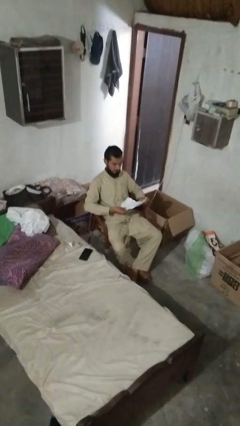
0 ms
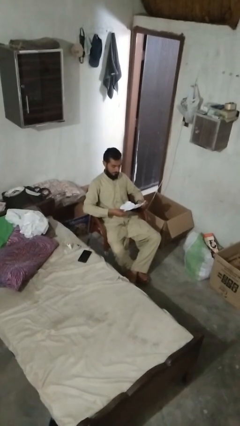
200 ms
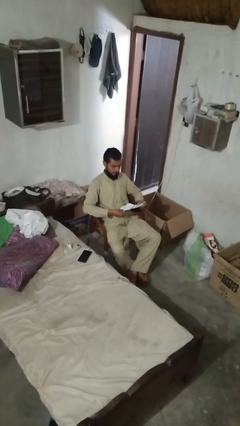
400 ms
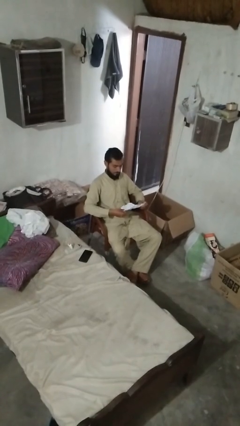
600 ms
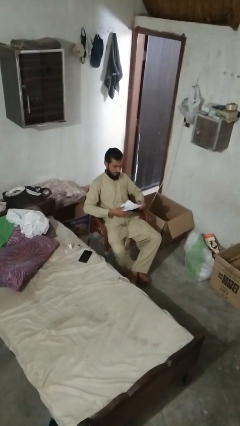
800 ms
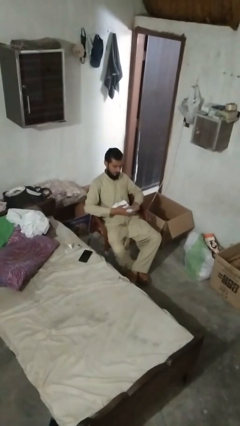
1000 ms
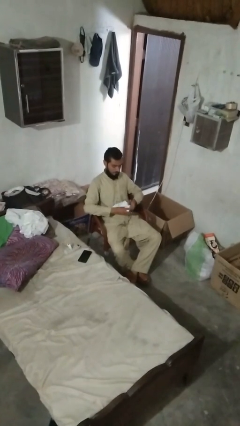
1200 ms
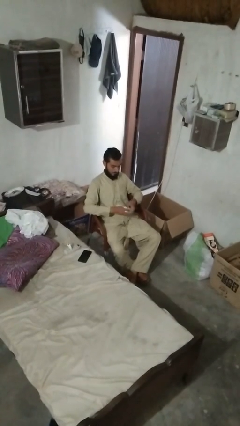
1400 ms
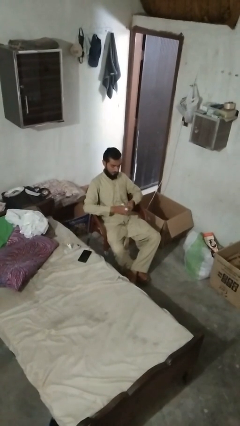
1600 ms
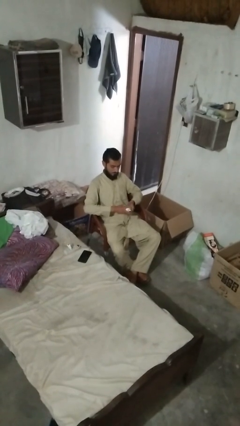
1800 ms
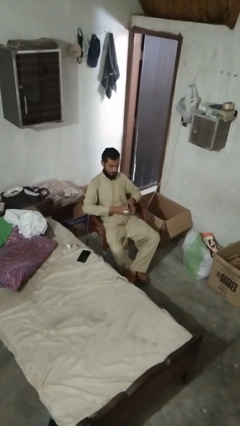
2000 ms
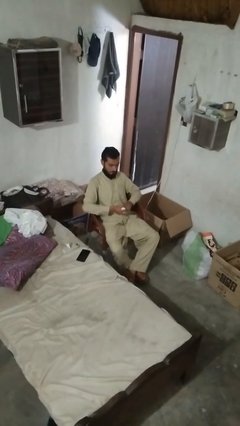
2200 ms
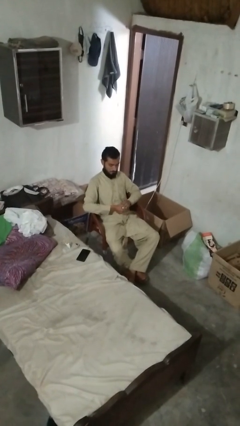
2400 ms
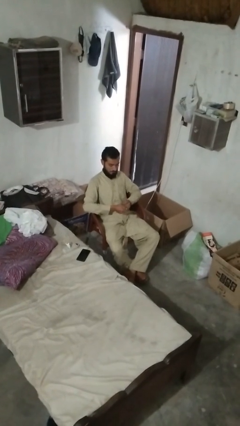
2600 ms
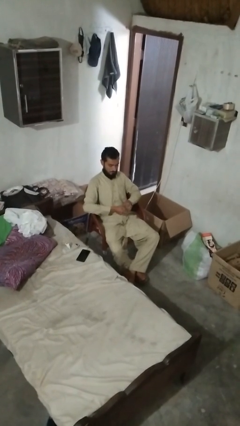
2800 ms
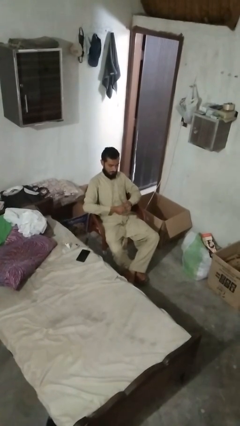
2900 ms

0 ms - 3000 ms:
person crumples paper

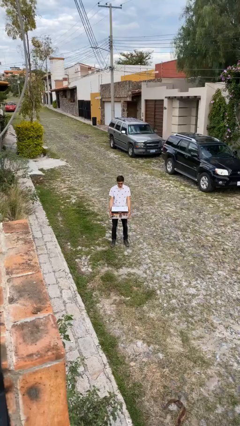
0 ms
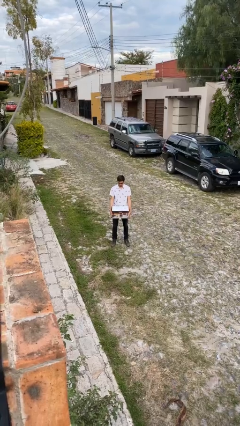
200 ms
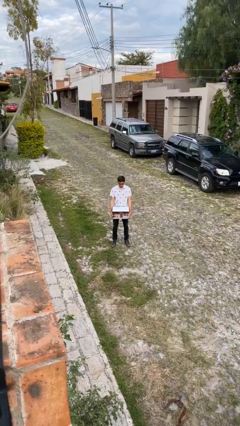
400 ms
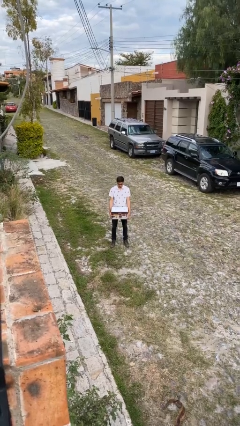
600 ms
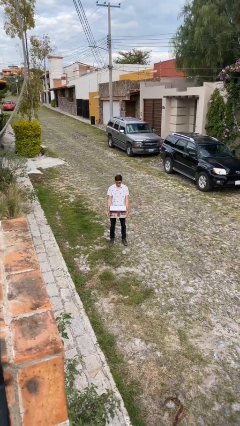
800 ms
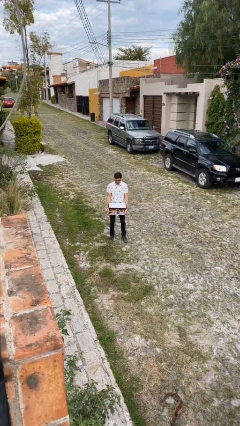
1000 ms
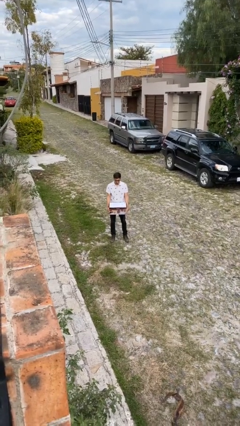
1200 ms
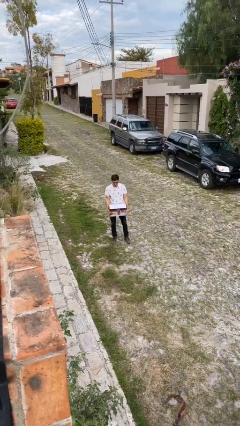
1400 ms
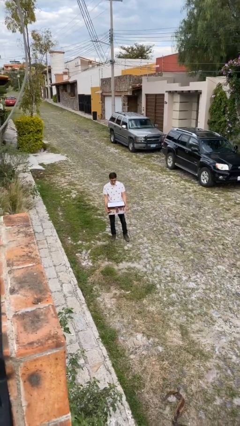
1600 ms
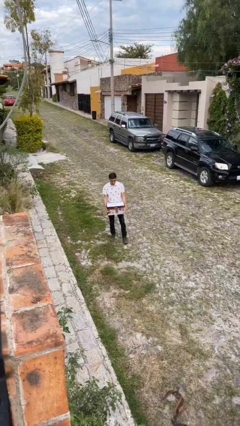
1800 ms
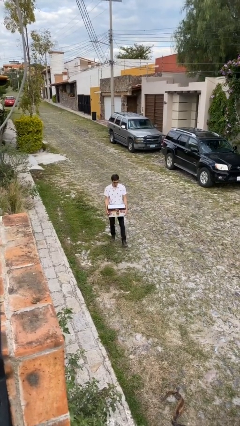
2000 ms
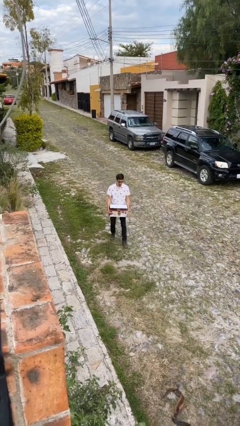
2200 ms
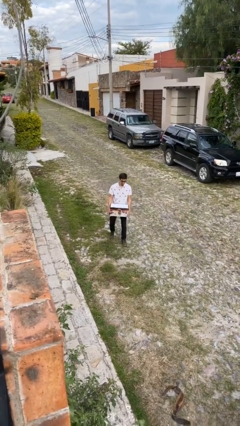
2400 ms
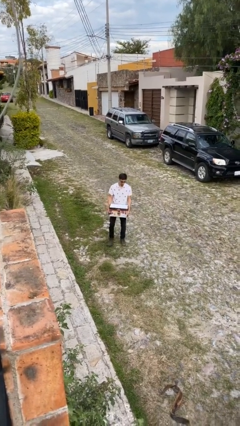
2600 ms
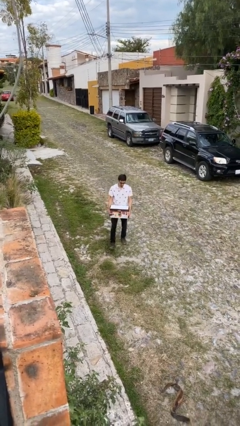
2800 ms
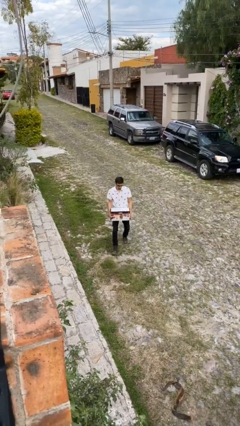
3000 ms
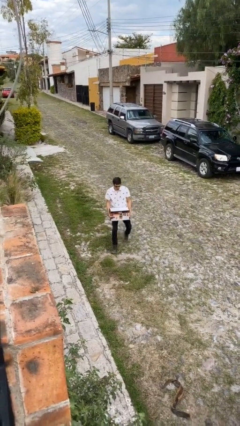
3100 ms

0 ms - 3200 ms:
person carries heavy object

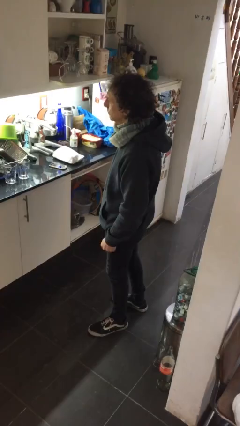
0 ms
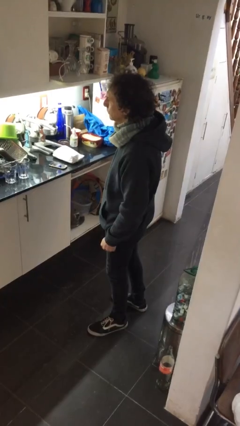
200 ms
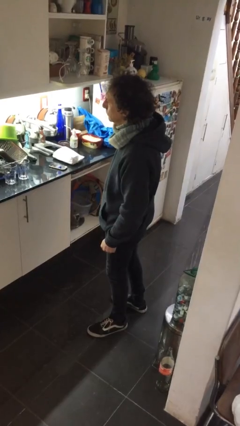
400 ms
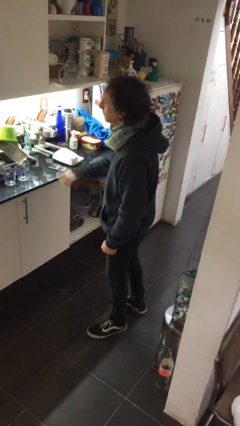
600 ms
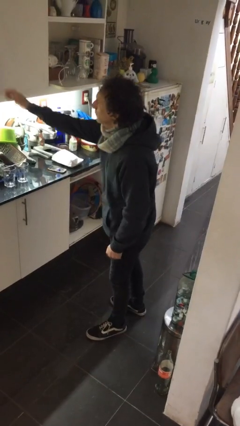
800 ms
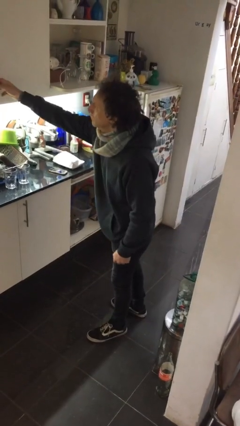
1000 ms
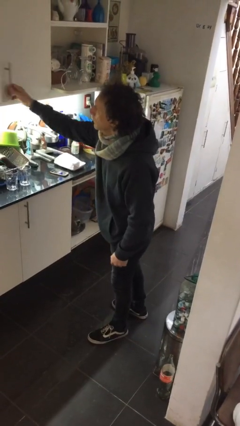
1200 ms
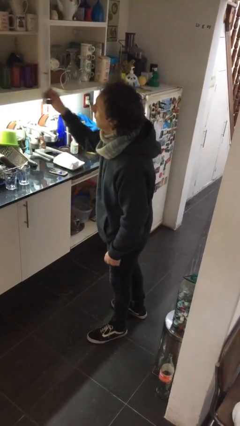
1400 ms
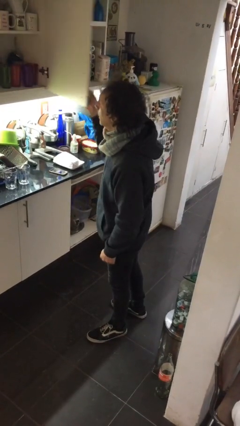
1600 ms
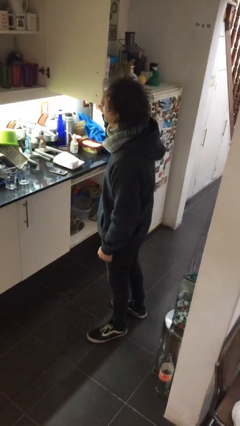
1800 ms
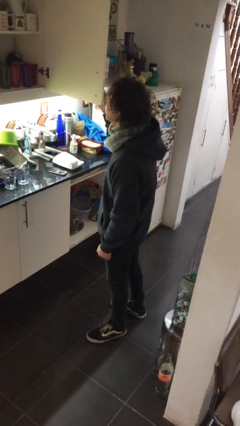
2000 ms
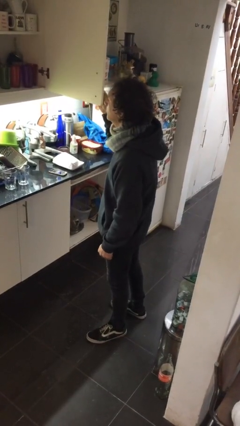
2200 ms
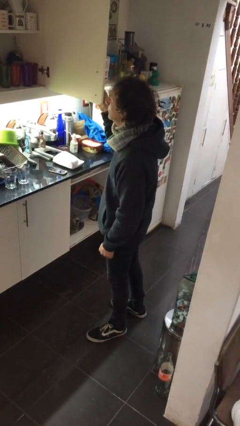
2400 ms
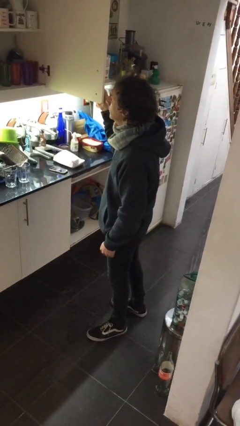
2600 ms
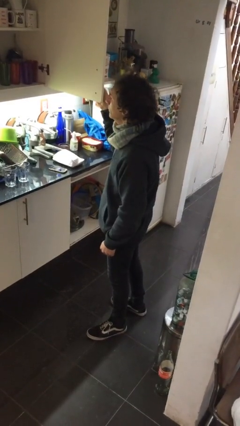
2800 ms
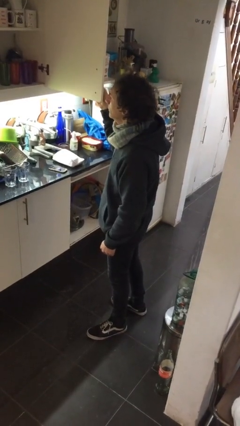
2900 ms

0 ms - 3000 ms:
person closes cabinet

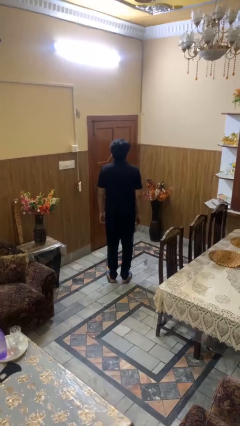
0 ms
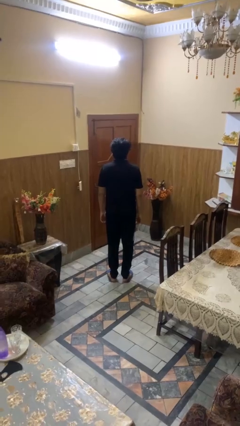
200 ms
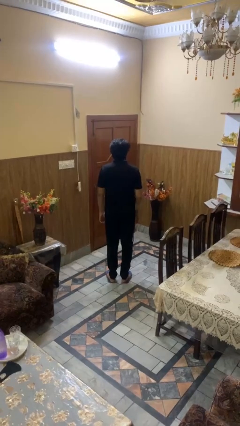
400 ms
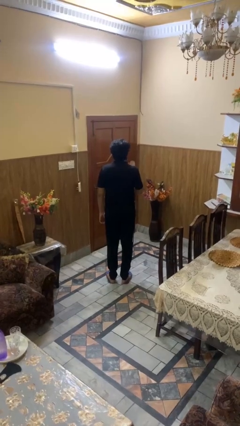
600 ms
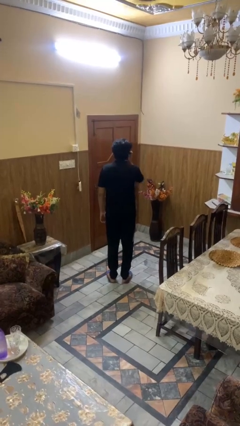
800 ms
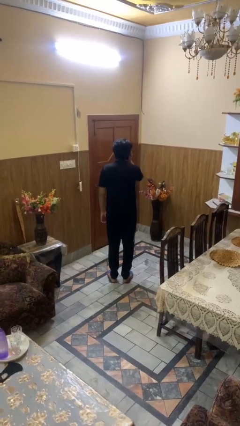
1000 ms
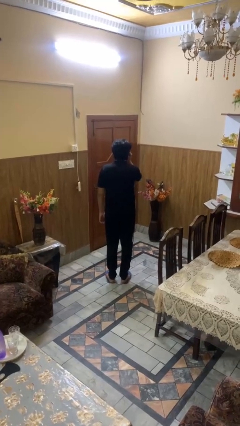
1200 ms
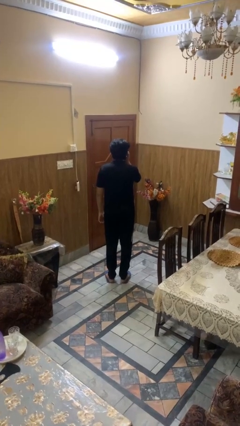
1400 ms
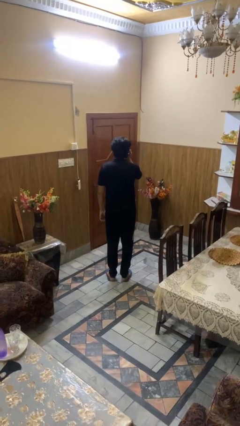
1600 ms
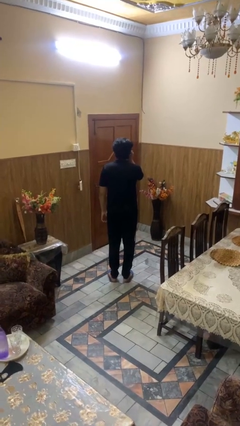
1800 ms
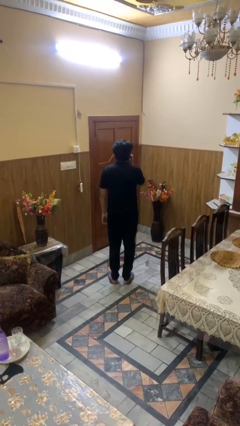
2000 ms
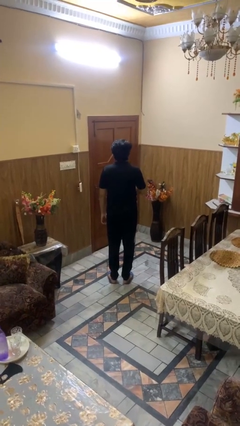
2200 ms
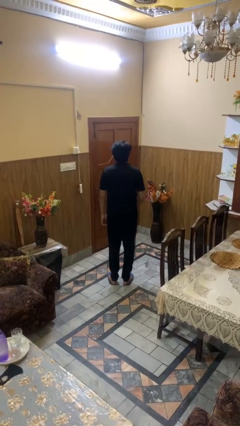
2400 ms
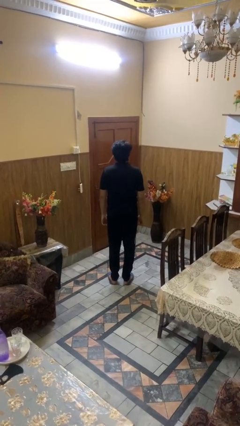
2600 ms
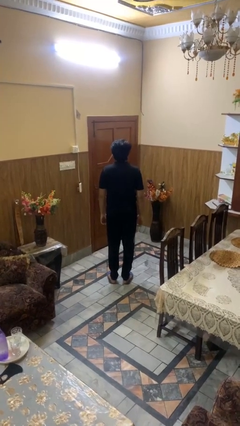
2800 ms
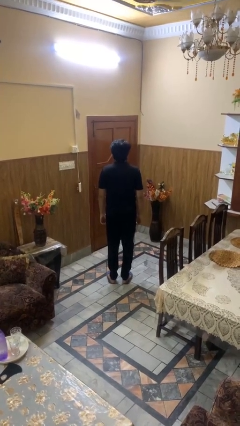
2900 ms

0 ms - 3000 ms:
person touches earlobe

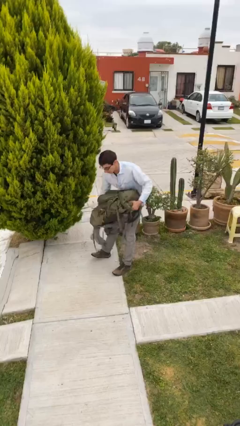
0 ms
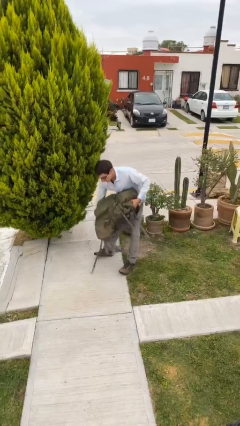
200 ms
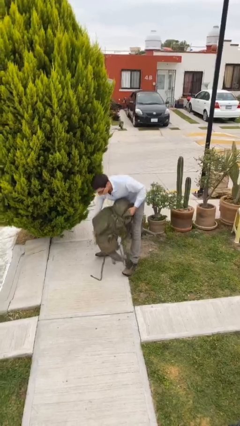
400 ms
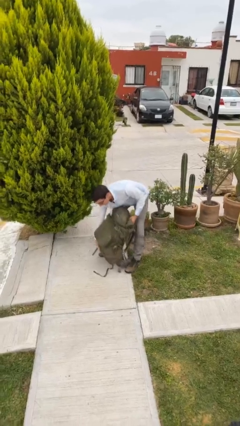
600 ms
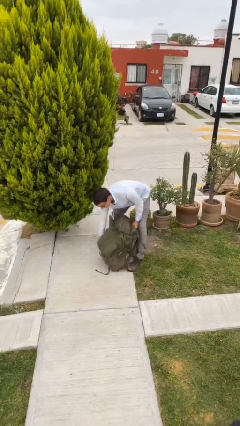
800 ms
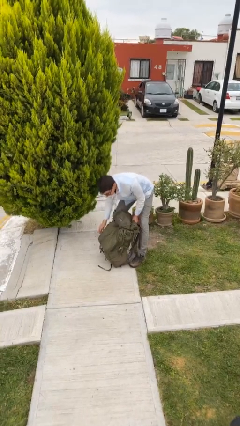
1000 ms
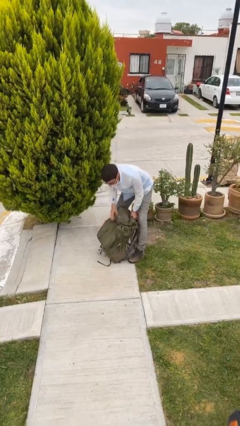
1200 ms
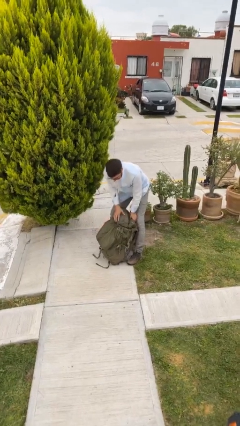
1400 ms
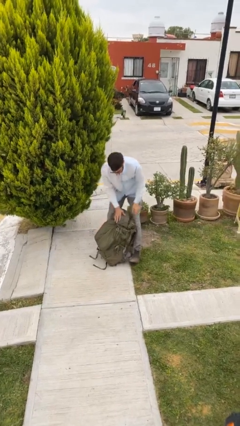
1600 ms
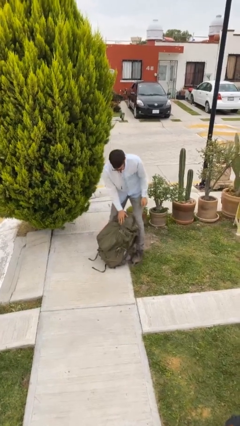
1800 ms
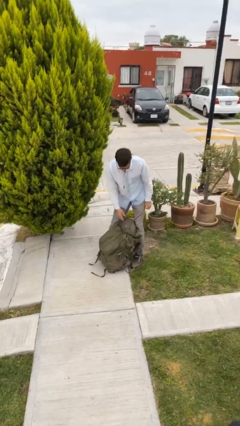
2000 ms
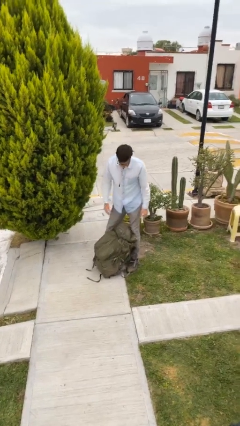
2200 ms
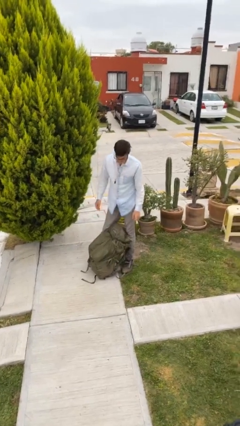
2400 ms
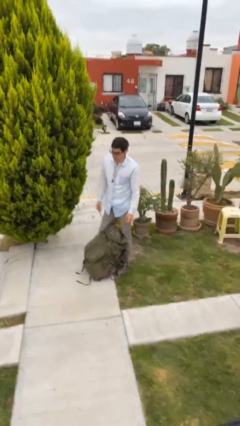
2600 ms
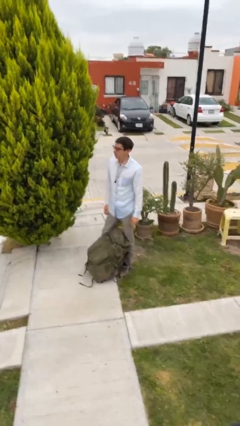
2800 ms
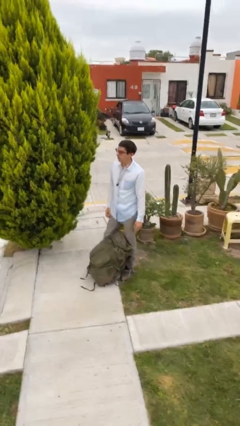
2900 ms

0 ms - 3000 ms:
person puts down object on floor

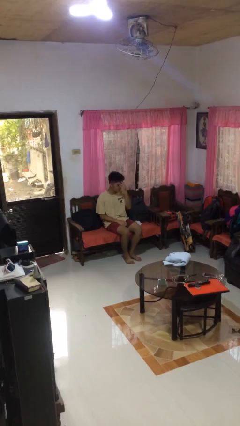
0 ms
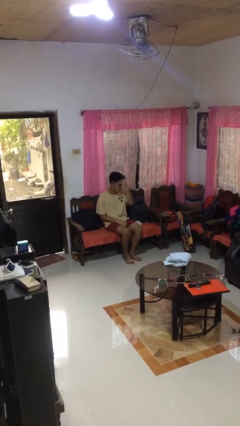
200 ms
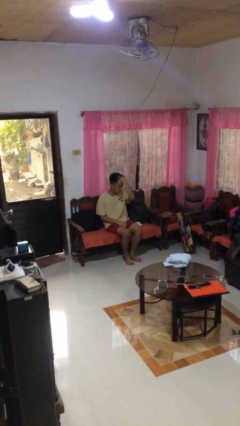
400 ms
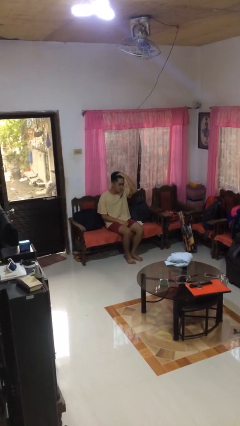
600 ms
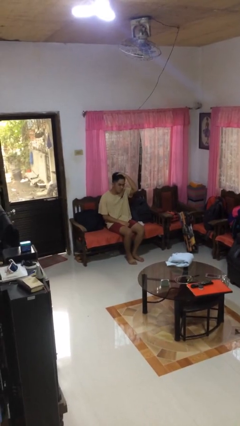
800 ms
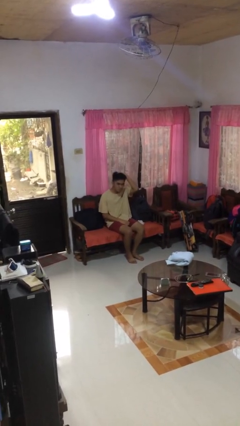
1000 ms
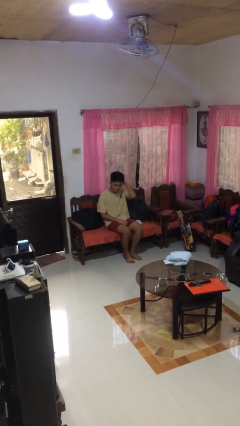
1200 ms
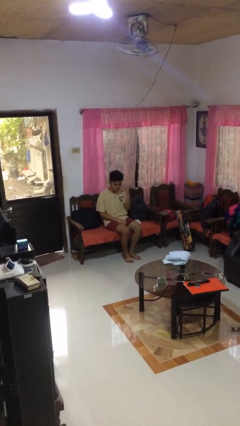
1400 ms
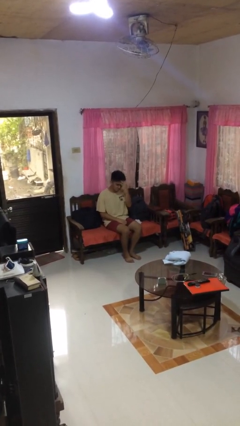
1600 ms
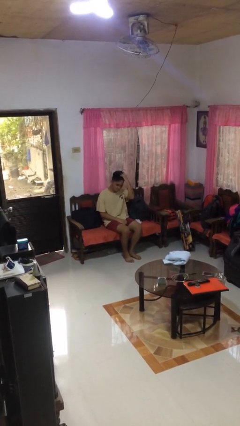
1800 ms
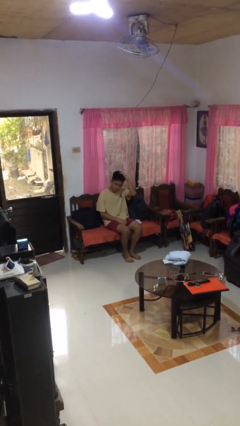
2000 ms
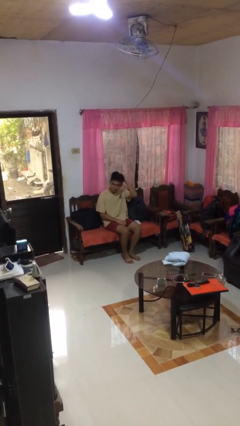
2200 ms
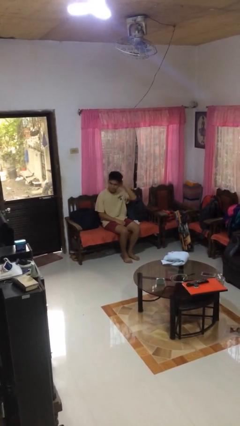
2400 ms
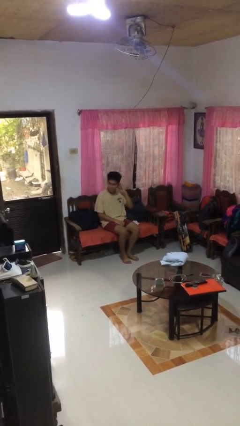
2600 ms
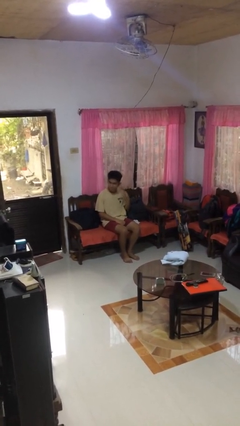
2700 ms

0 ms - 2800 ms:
person strokes hair
